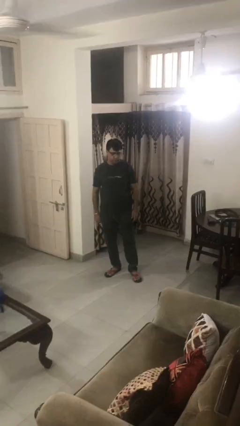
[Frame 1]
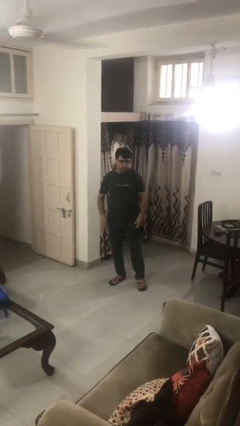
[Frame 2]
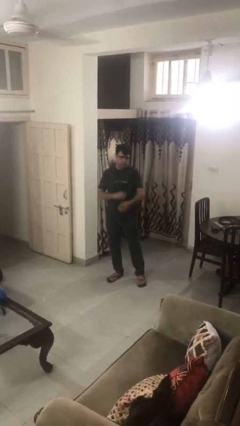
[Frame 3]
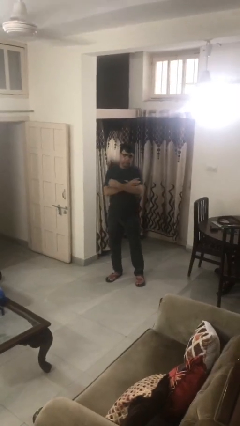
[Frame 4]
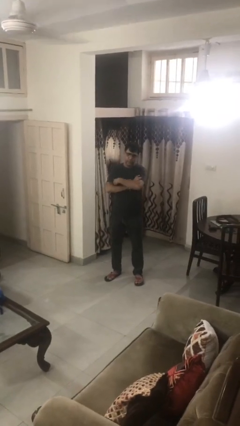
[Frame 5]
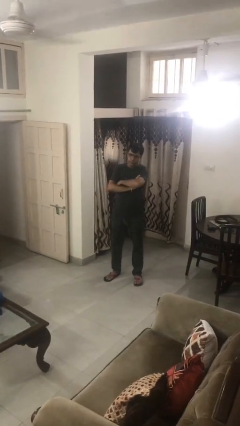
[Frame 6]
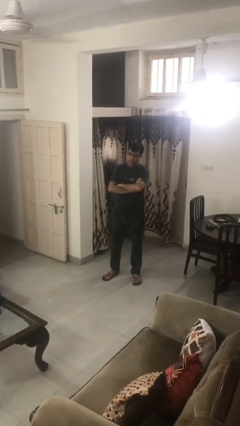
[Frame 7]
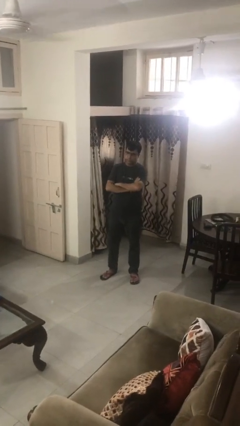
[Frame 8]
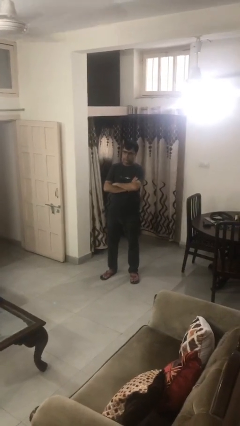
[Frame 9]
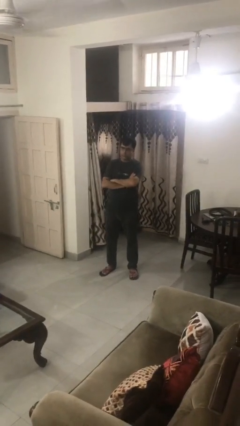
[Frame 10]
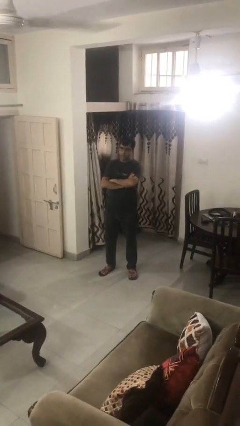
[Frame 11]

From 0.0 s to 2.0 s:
person crosses arms

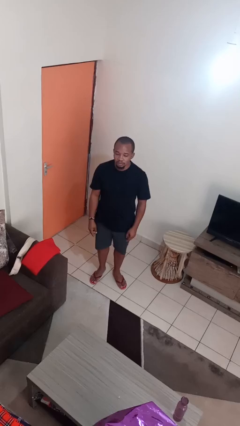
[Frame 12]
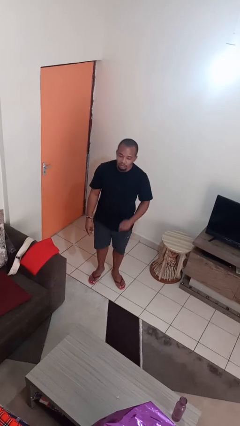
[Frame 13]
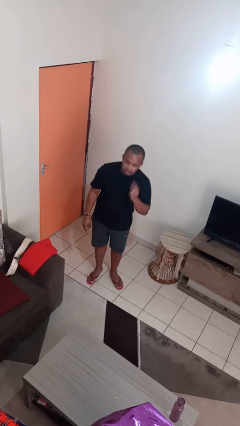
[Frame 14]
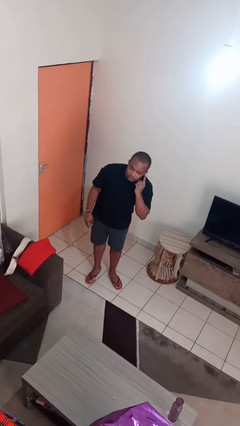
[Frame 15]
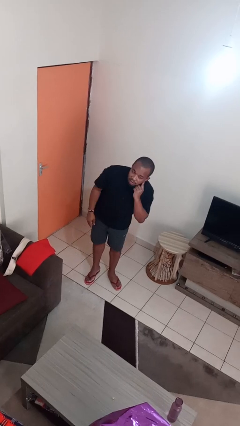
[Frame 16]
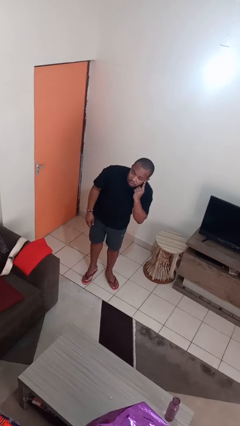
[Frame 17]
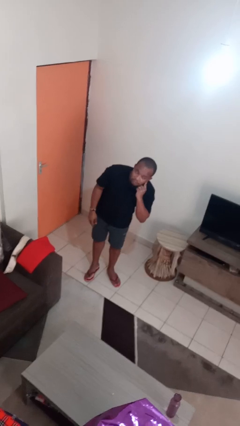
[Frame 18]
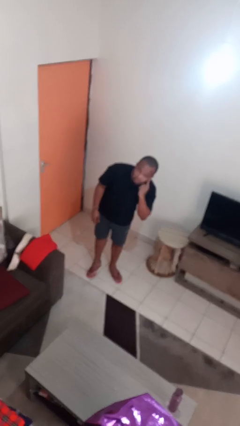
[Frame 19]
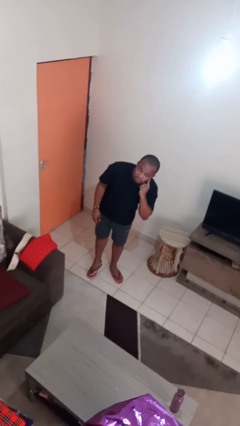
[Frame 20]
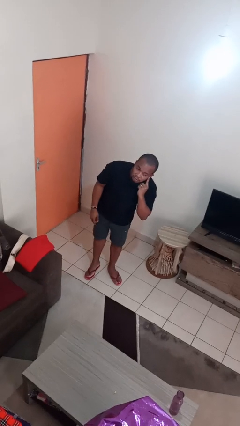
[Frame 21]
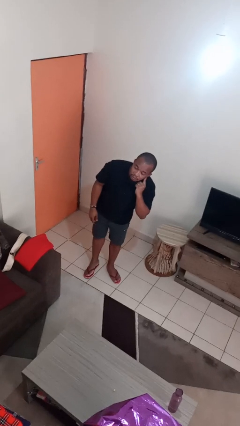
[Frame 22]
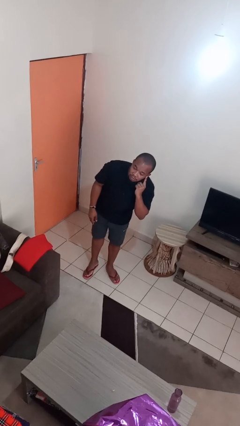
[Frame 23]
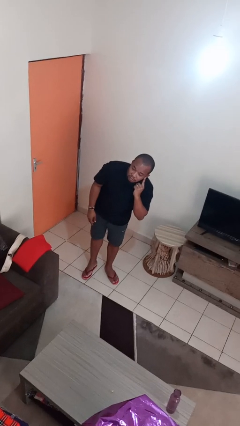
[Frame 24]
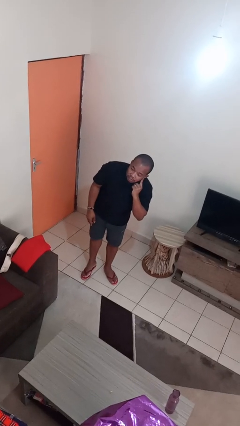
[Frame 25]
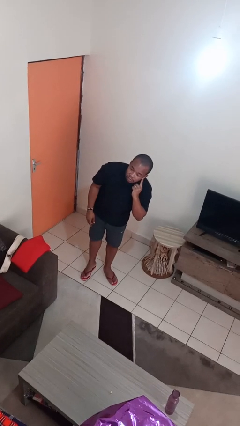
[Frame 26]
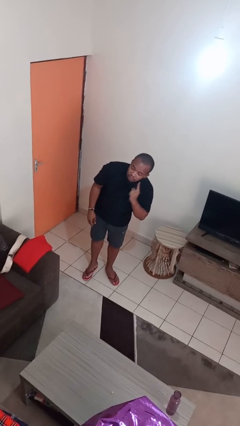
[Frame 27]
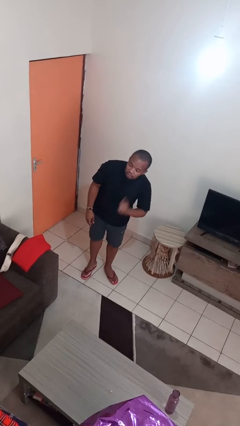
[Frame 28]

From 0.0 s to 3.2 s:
person gestures listen closely

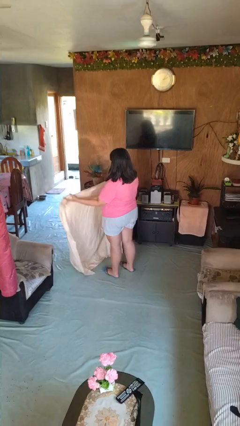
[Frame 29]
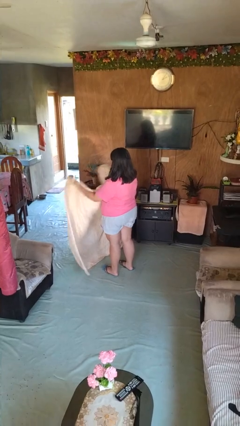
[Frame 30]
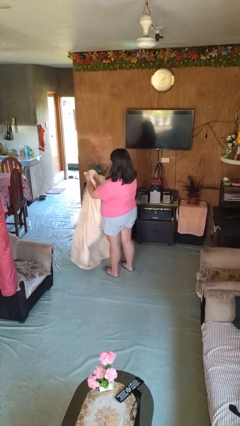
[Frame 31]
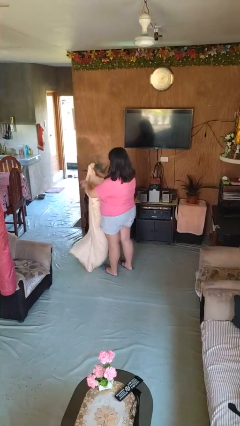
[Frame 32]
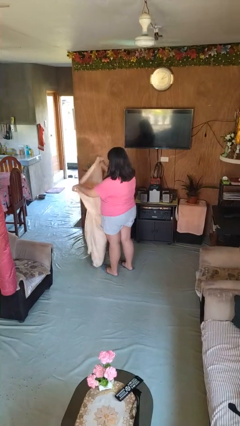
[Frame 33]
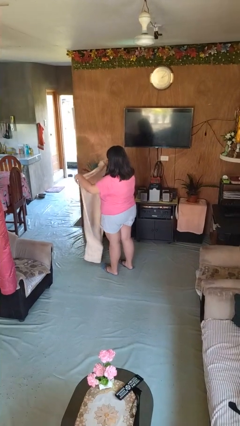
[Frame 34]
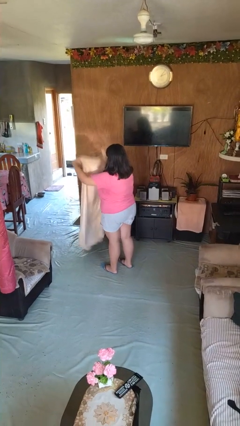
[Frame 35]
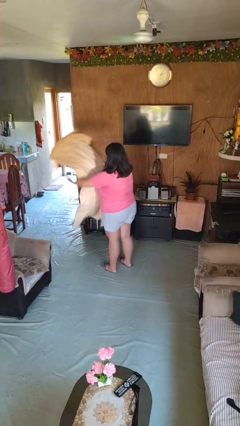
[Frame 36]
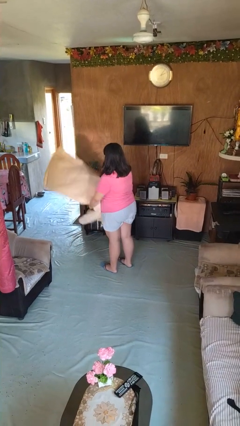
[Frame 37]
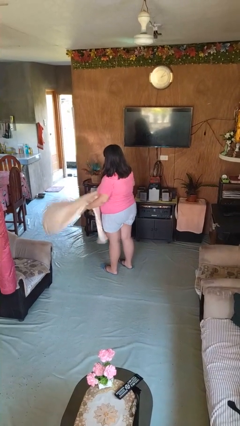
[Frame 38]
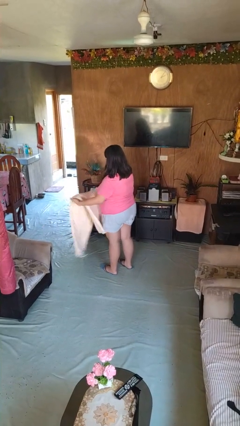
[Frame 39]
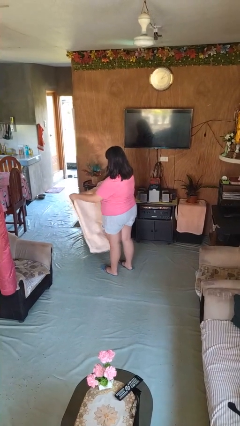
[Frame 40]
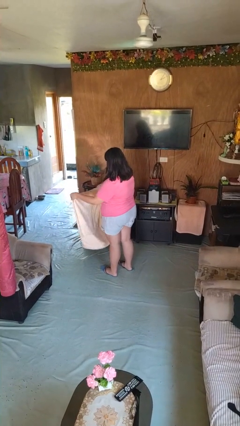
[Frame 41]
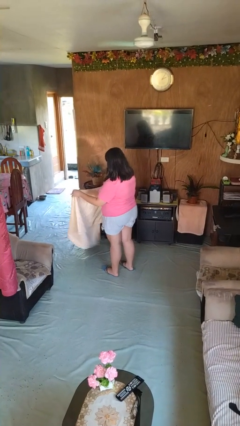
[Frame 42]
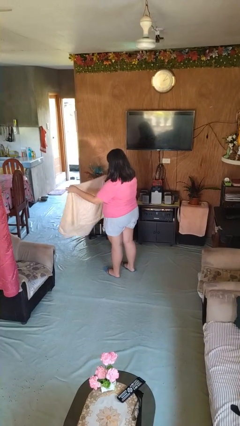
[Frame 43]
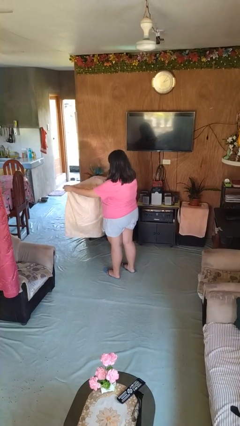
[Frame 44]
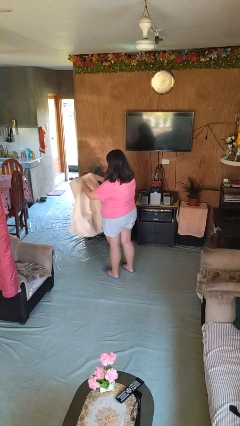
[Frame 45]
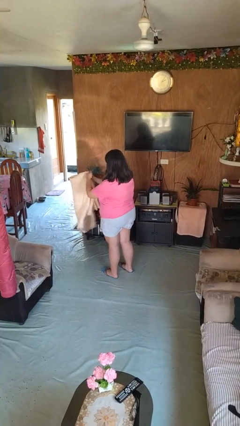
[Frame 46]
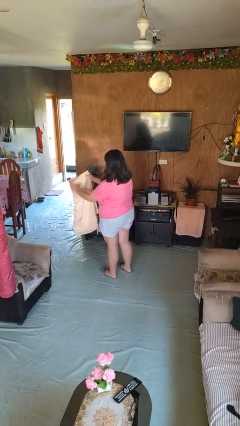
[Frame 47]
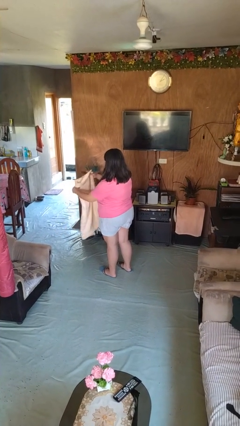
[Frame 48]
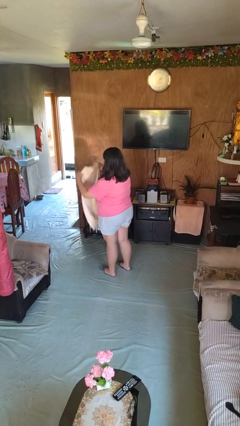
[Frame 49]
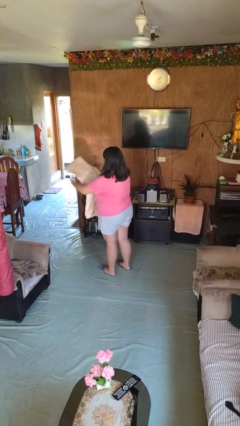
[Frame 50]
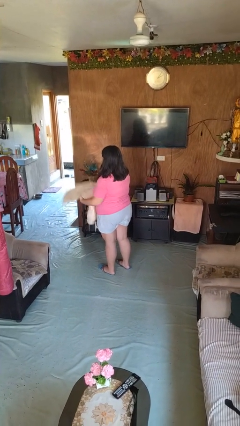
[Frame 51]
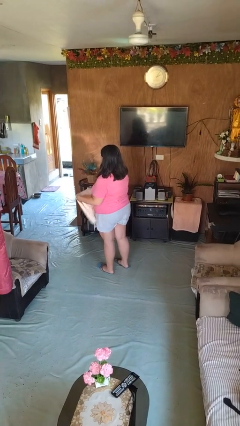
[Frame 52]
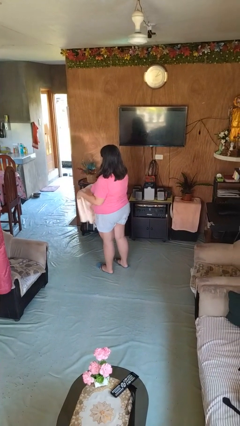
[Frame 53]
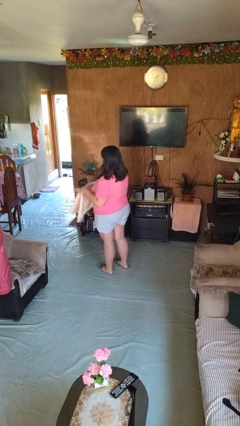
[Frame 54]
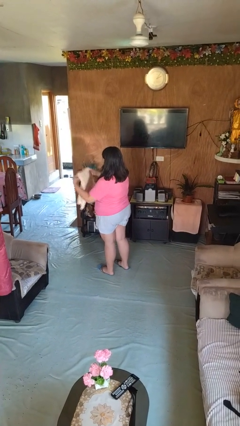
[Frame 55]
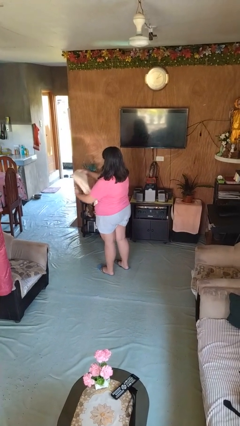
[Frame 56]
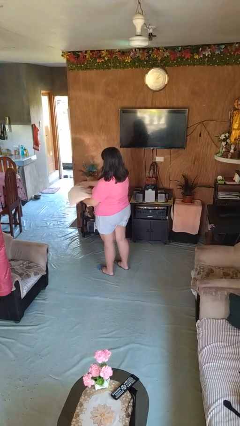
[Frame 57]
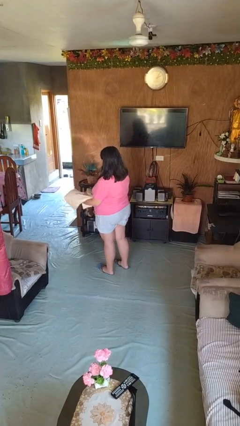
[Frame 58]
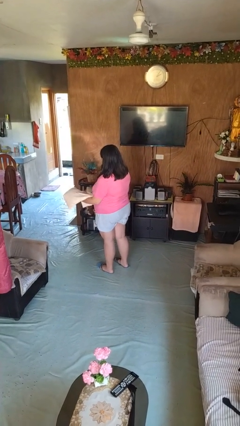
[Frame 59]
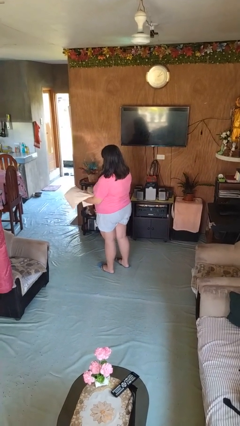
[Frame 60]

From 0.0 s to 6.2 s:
person folds blanket

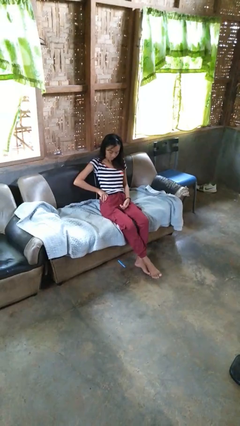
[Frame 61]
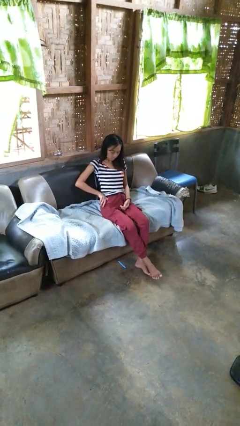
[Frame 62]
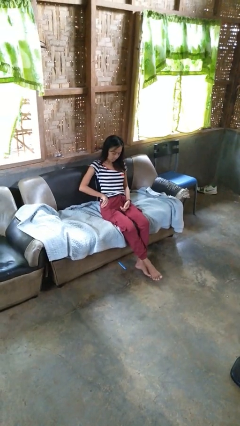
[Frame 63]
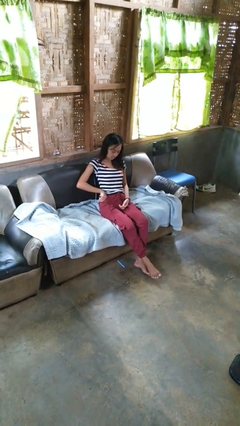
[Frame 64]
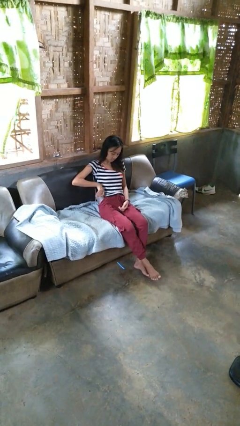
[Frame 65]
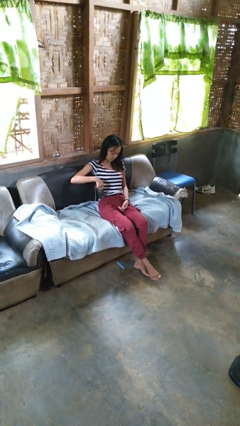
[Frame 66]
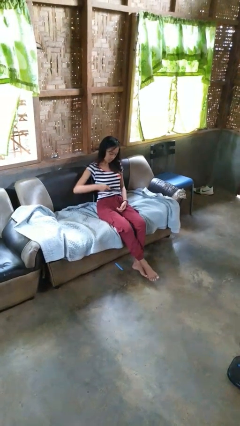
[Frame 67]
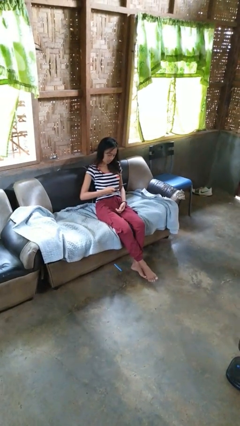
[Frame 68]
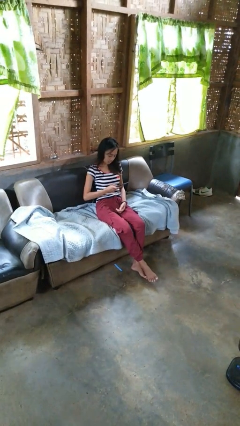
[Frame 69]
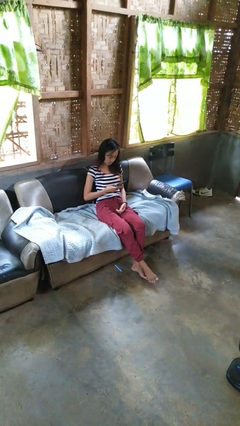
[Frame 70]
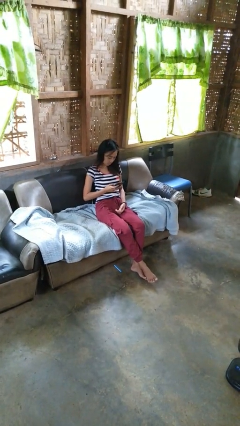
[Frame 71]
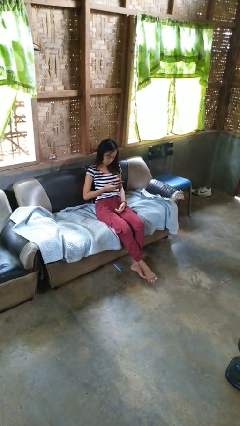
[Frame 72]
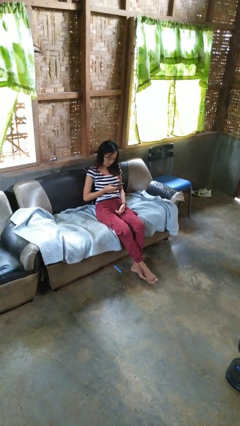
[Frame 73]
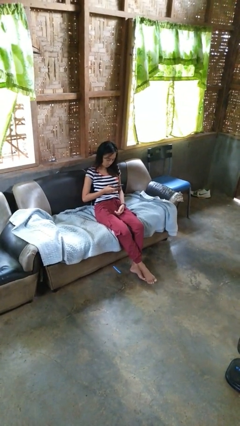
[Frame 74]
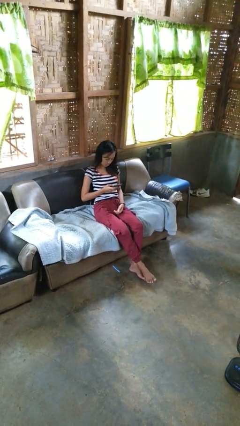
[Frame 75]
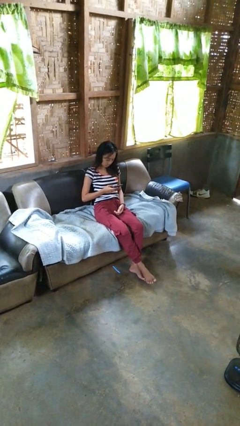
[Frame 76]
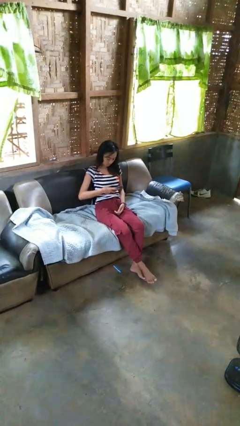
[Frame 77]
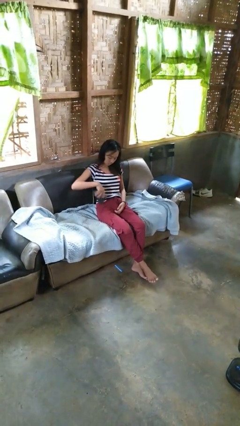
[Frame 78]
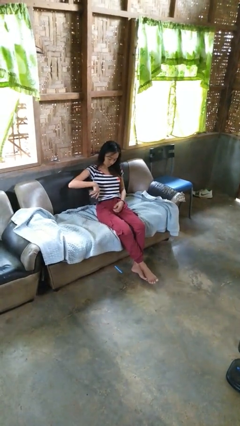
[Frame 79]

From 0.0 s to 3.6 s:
person takes phone from pocket

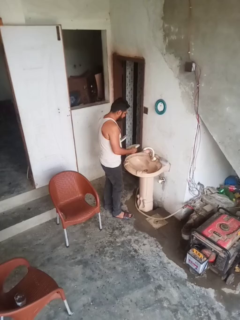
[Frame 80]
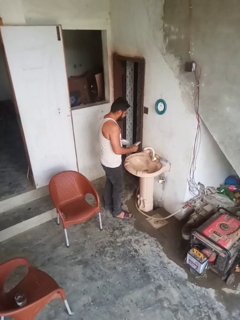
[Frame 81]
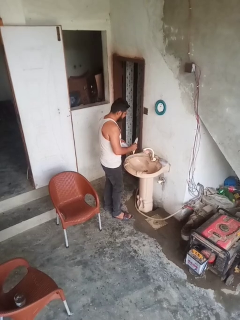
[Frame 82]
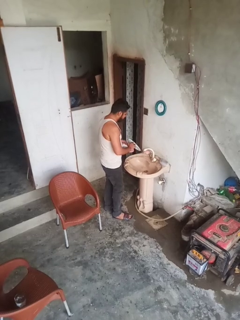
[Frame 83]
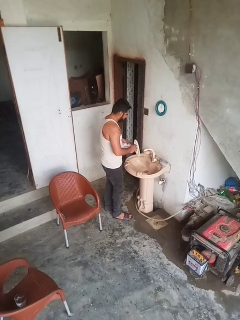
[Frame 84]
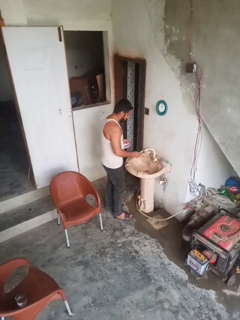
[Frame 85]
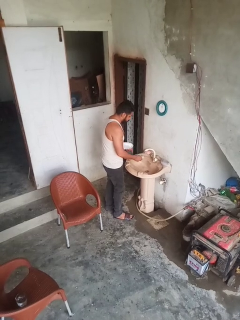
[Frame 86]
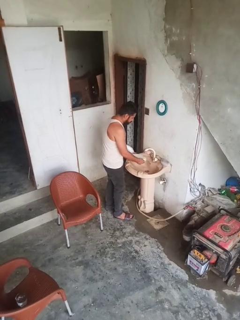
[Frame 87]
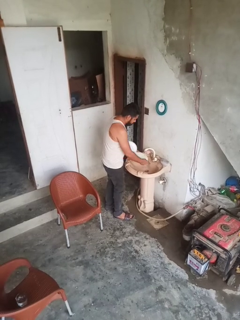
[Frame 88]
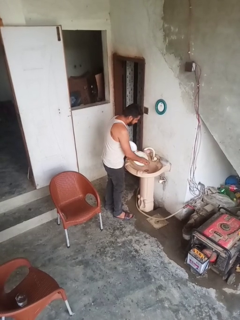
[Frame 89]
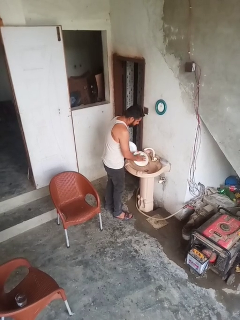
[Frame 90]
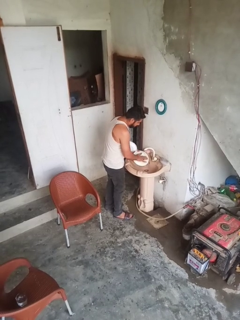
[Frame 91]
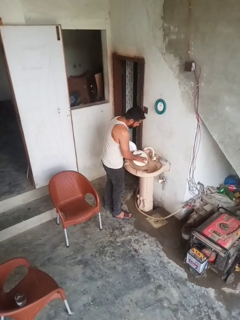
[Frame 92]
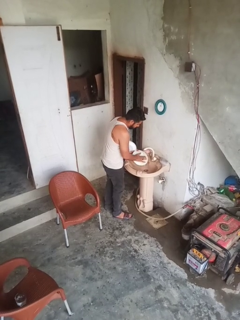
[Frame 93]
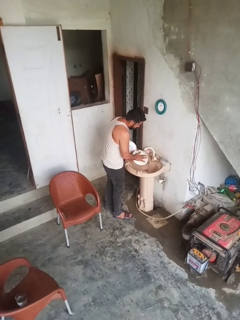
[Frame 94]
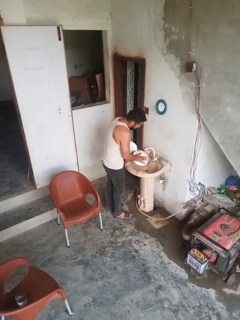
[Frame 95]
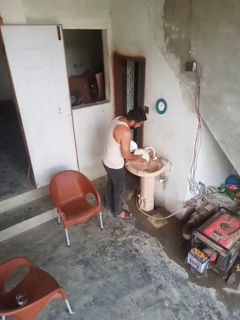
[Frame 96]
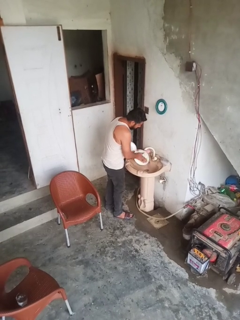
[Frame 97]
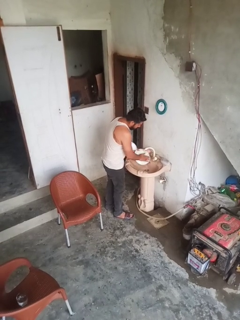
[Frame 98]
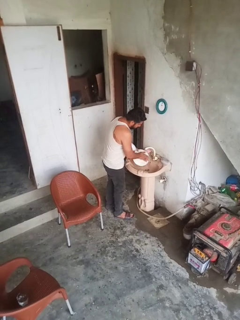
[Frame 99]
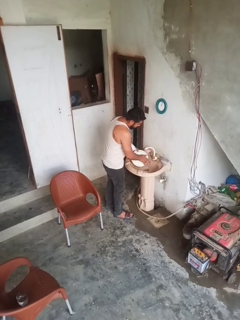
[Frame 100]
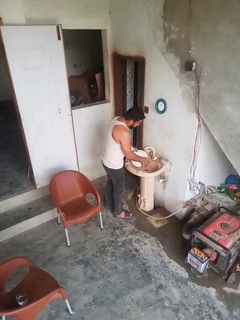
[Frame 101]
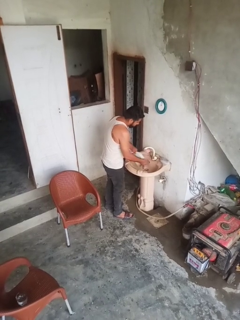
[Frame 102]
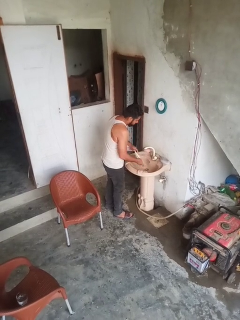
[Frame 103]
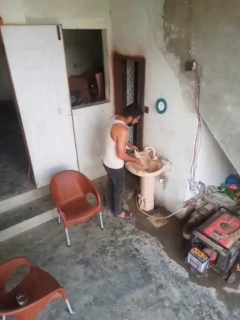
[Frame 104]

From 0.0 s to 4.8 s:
person washes dish
